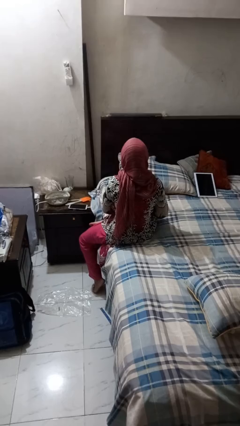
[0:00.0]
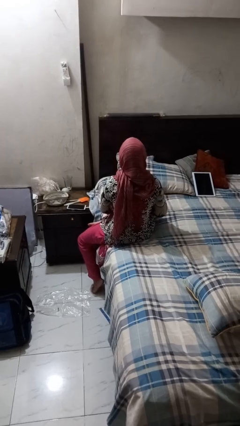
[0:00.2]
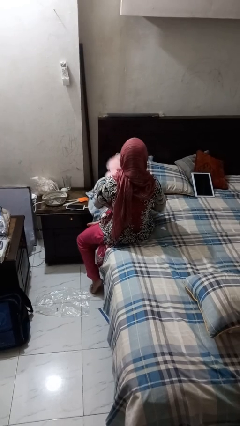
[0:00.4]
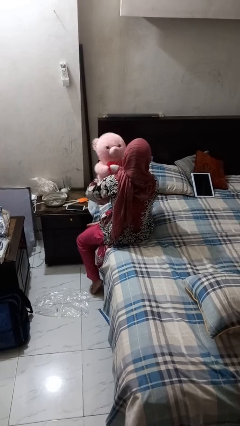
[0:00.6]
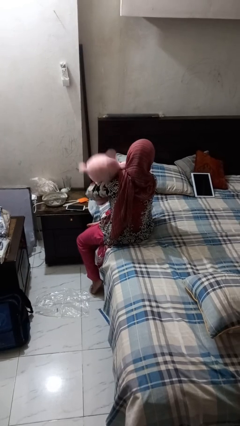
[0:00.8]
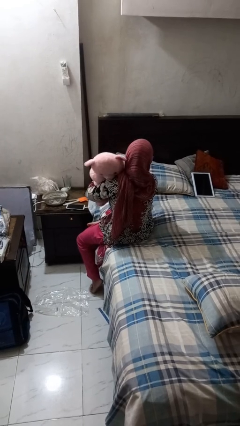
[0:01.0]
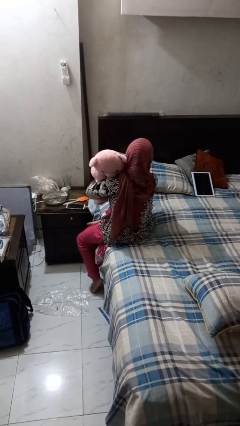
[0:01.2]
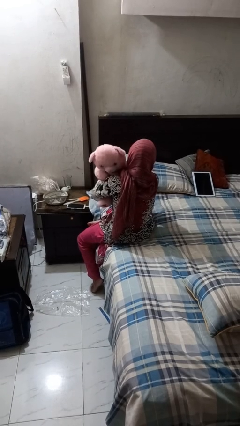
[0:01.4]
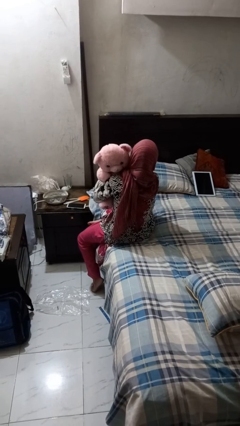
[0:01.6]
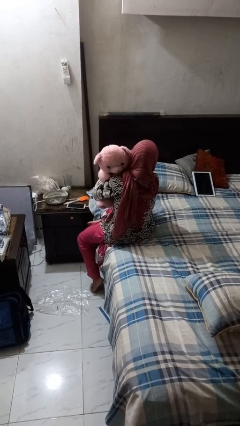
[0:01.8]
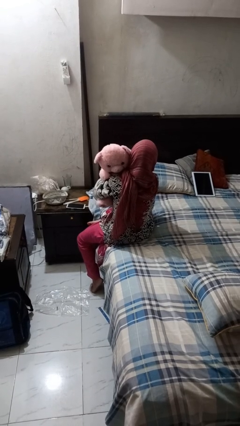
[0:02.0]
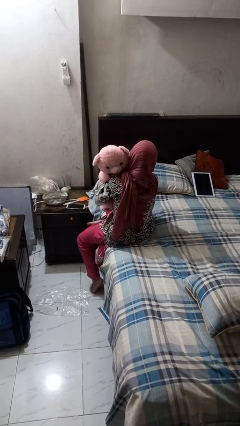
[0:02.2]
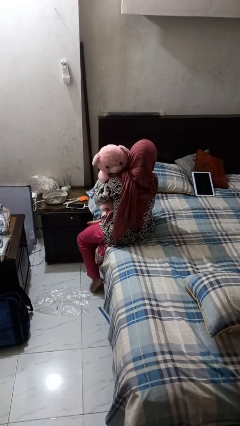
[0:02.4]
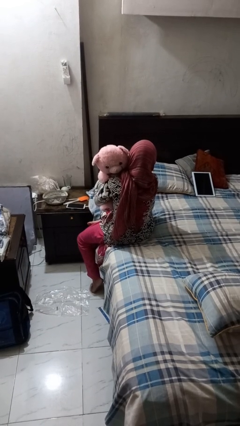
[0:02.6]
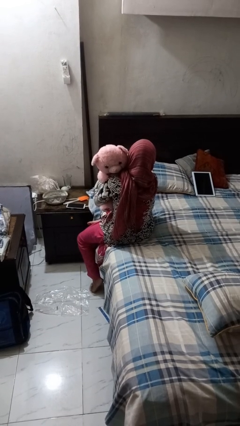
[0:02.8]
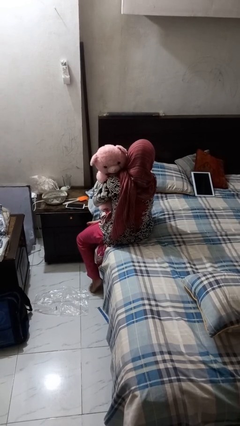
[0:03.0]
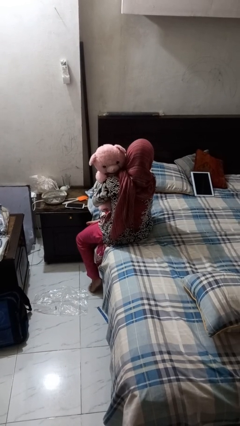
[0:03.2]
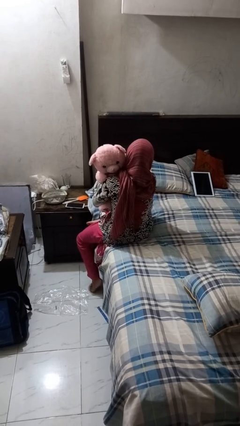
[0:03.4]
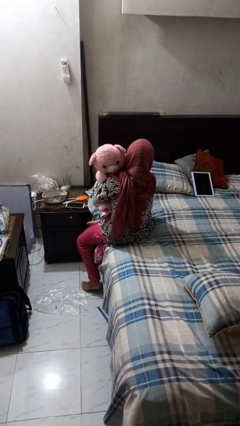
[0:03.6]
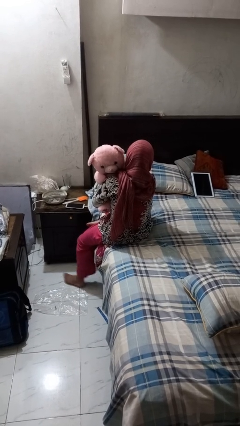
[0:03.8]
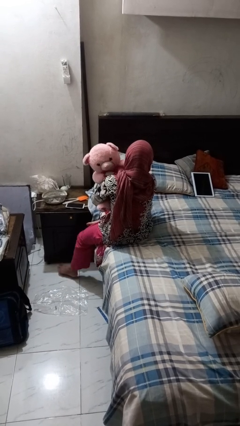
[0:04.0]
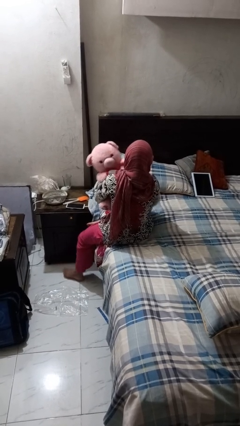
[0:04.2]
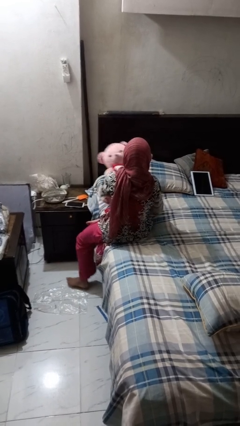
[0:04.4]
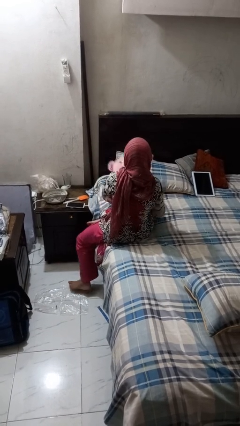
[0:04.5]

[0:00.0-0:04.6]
person hugs stuffed animal

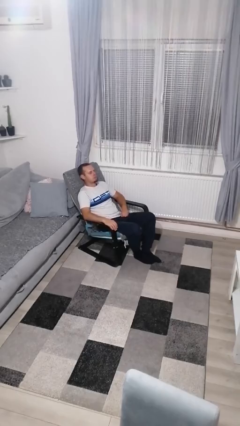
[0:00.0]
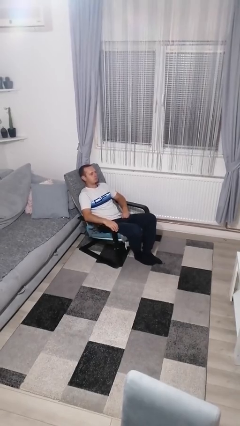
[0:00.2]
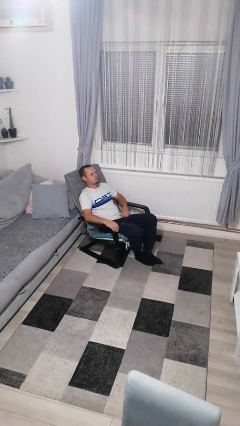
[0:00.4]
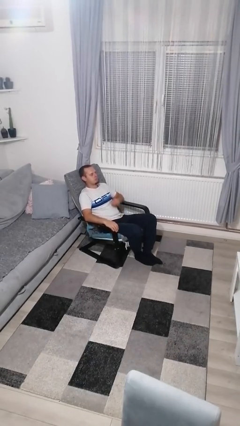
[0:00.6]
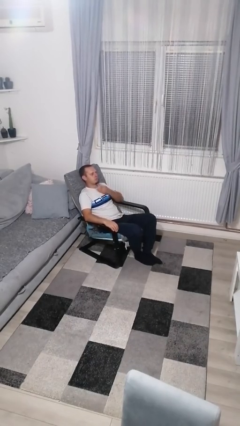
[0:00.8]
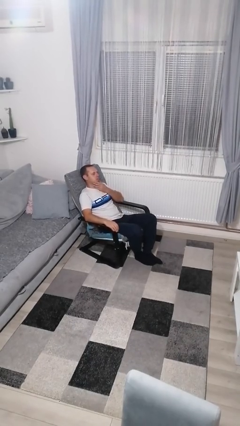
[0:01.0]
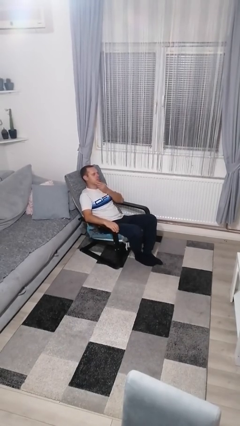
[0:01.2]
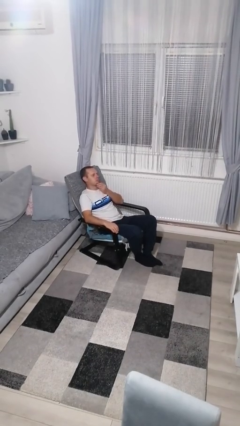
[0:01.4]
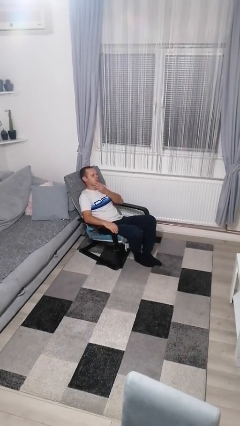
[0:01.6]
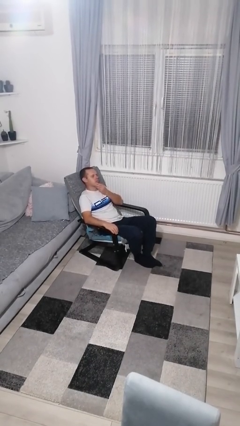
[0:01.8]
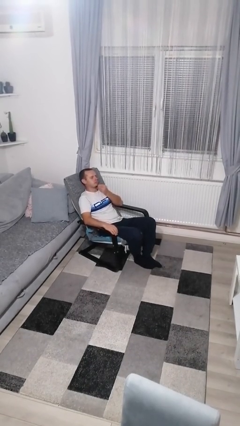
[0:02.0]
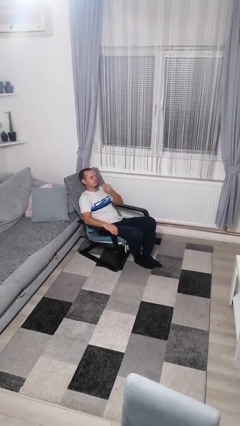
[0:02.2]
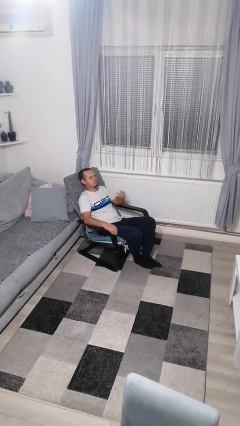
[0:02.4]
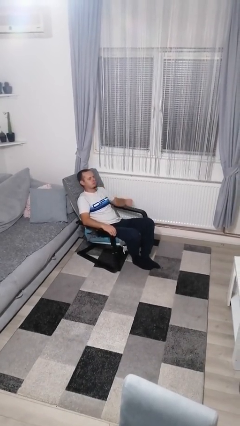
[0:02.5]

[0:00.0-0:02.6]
person strokes chin

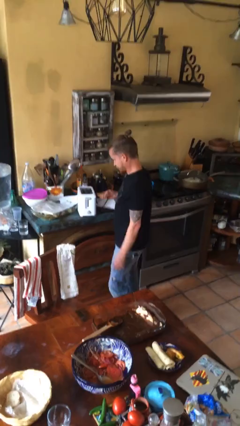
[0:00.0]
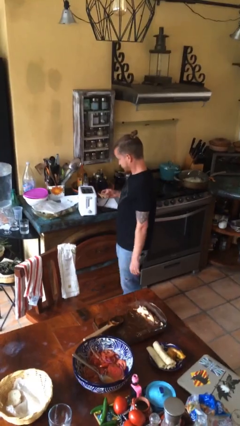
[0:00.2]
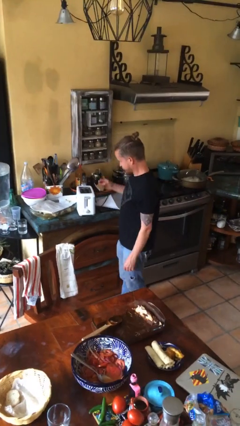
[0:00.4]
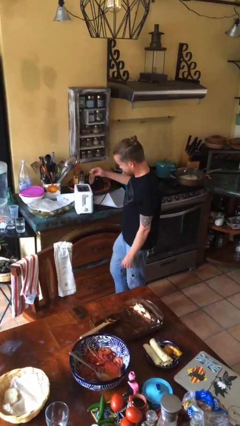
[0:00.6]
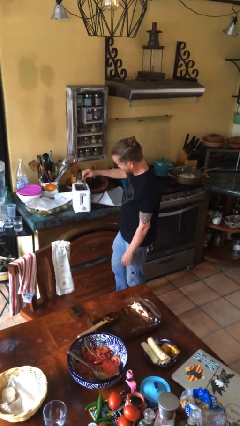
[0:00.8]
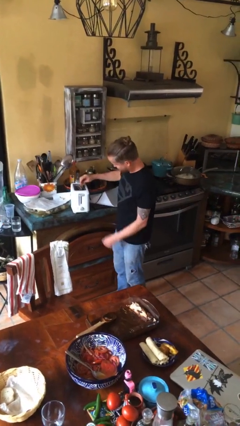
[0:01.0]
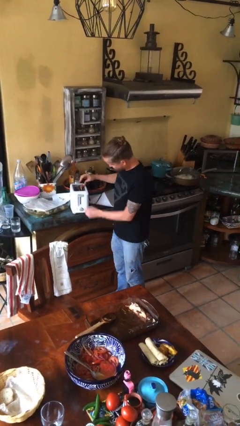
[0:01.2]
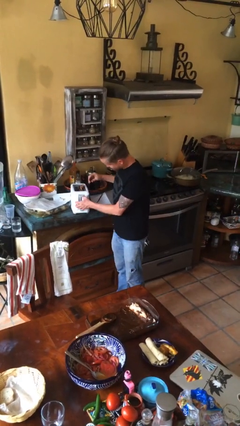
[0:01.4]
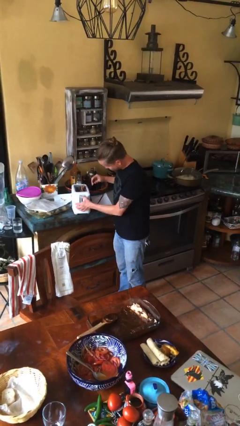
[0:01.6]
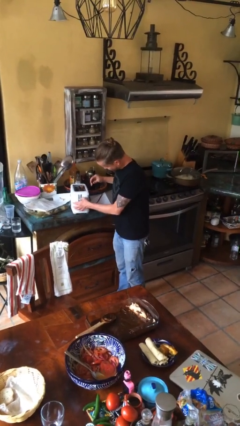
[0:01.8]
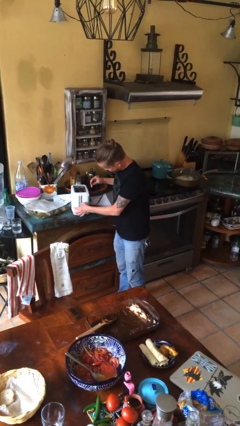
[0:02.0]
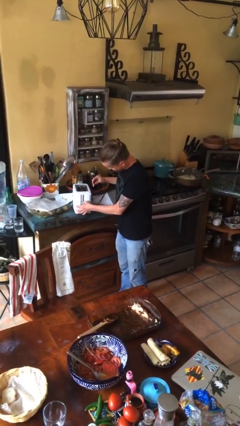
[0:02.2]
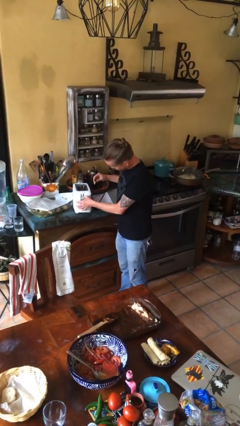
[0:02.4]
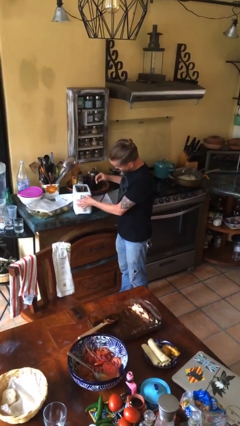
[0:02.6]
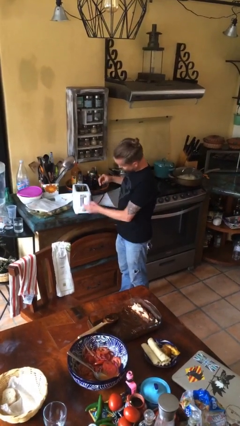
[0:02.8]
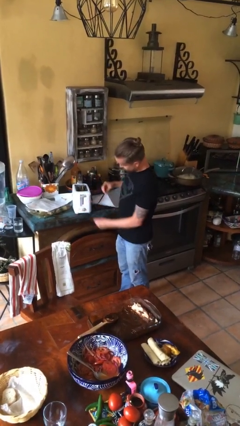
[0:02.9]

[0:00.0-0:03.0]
person puts object into toaster

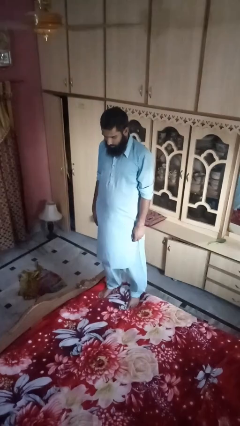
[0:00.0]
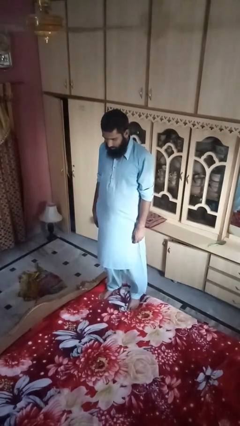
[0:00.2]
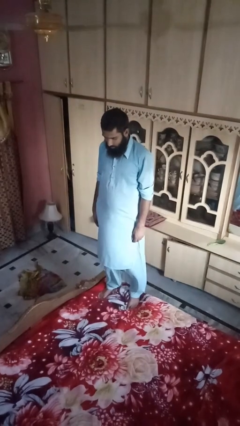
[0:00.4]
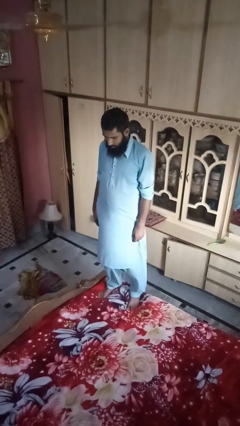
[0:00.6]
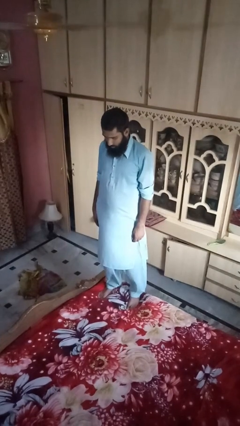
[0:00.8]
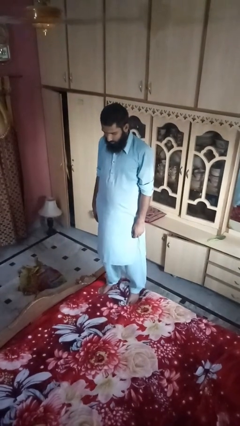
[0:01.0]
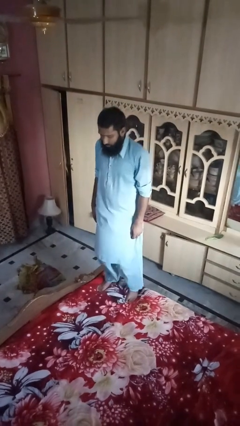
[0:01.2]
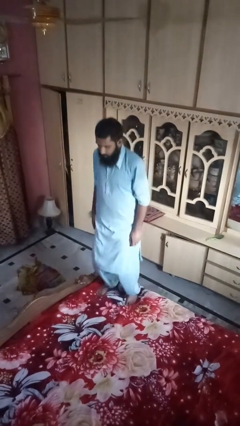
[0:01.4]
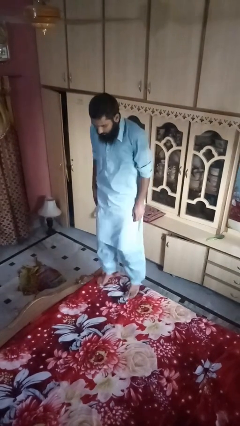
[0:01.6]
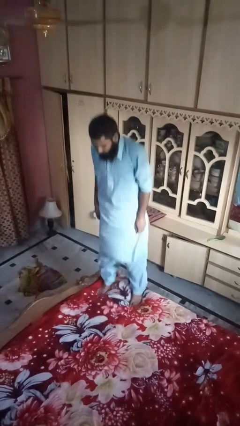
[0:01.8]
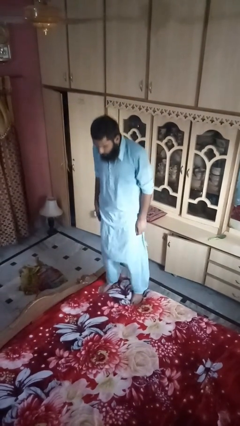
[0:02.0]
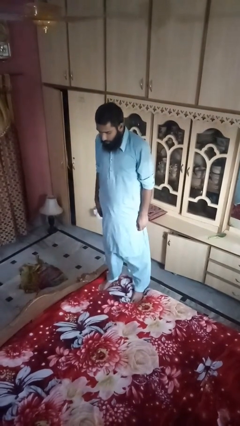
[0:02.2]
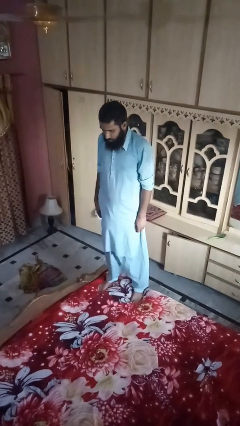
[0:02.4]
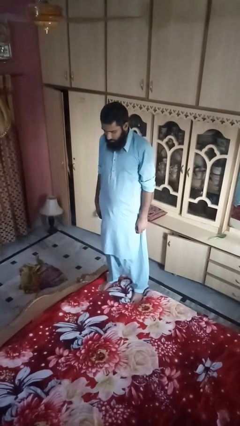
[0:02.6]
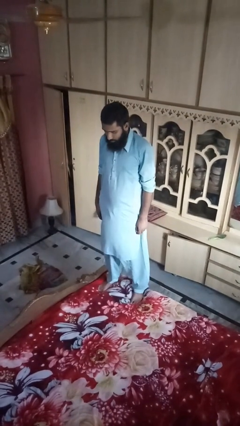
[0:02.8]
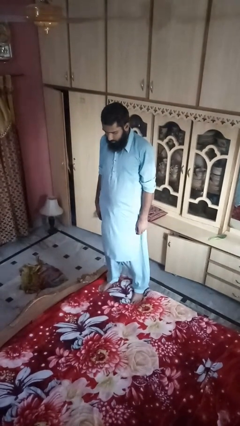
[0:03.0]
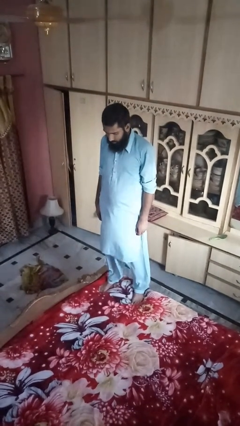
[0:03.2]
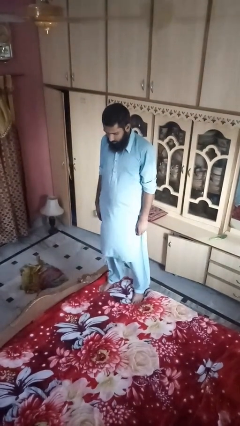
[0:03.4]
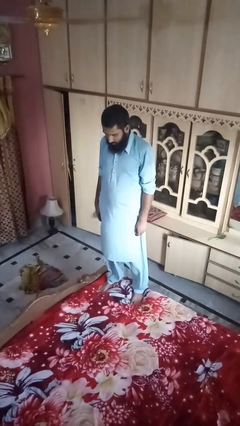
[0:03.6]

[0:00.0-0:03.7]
person jumps on bed

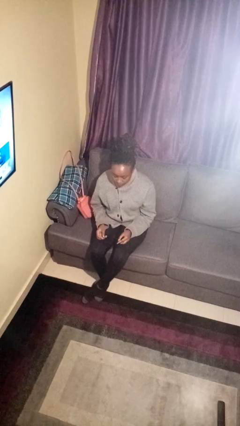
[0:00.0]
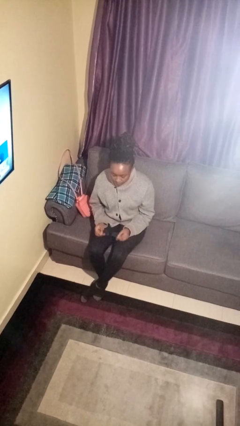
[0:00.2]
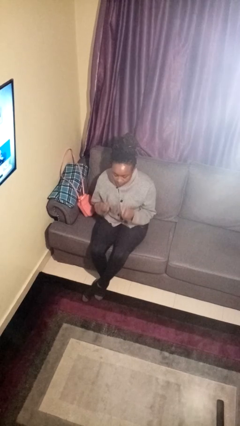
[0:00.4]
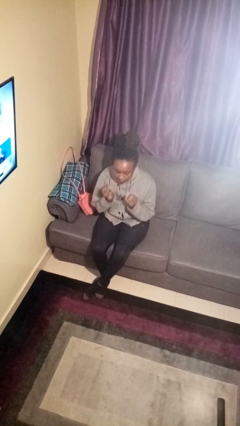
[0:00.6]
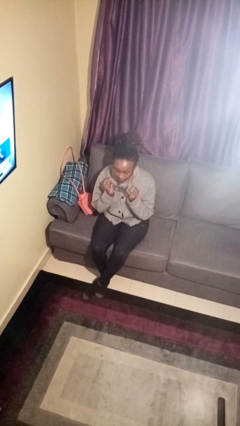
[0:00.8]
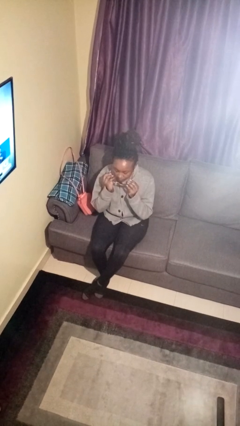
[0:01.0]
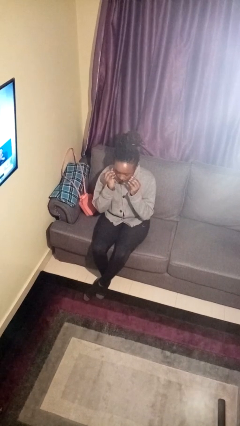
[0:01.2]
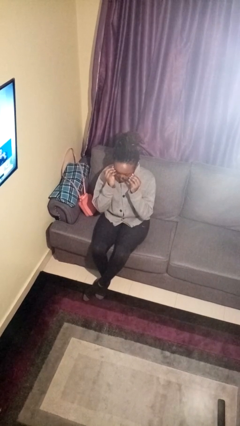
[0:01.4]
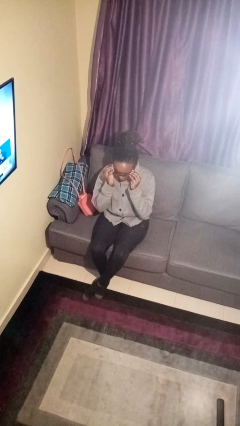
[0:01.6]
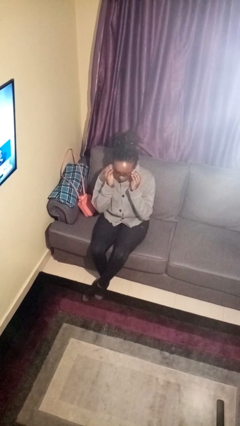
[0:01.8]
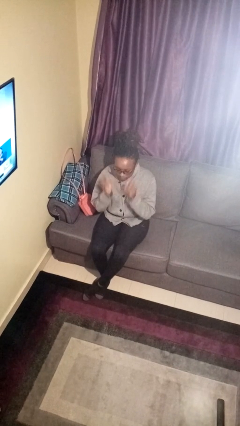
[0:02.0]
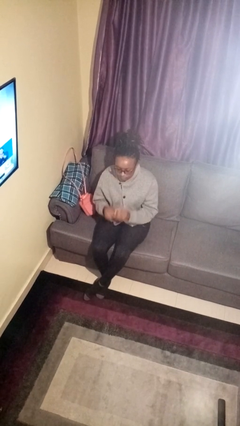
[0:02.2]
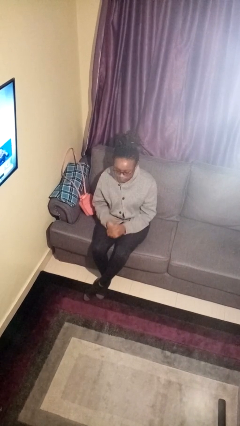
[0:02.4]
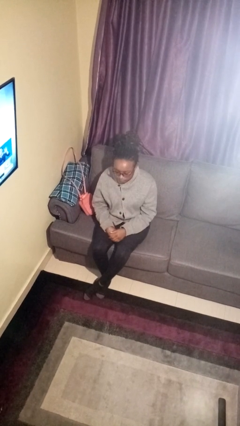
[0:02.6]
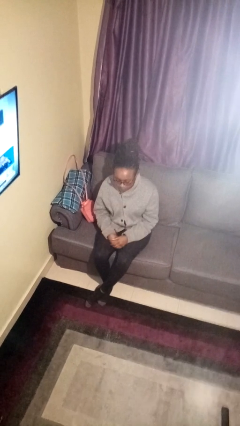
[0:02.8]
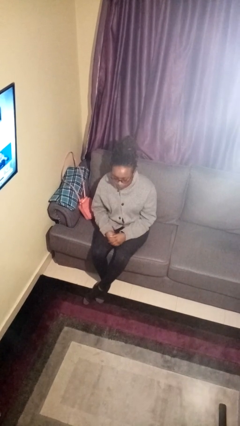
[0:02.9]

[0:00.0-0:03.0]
person puts on glasses

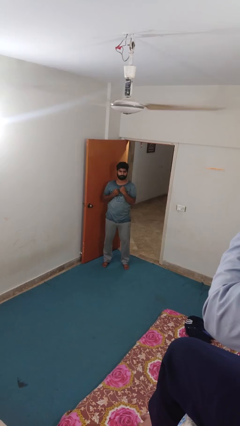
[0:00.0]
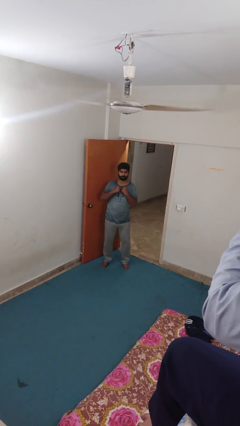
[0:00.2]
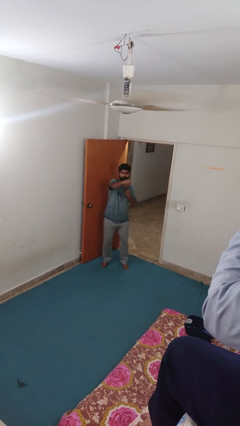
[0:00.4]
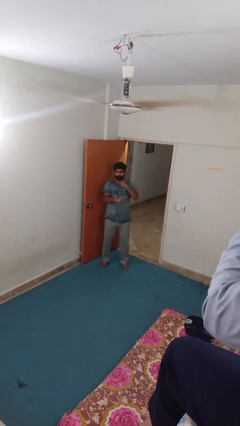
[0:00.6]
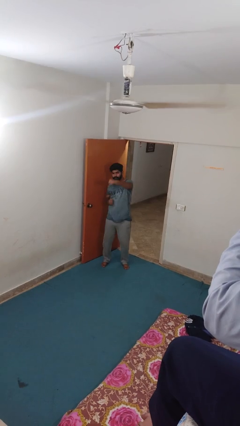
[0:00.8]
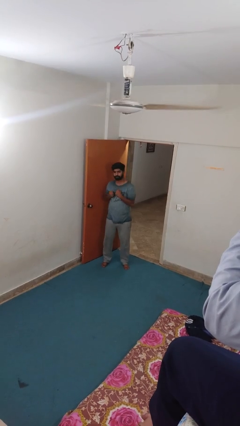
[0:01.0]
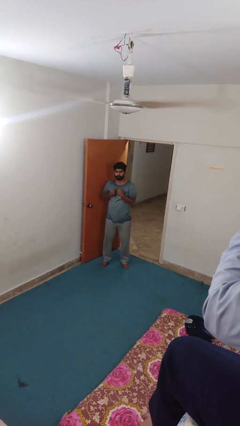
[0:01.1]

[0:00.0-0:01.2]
person punches
